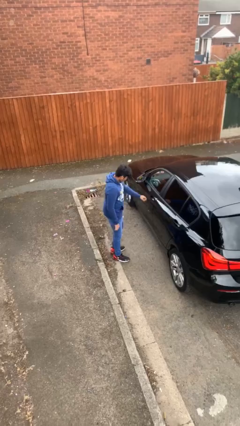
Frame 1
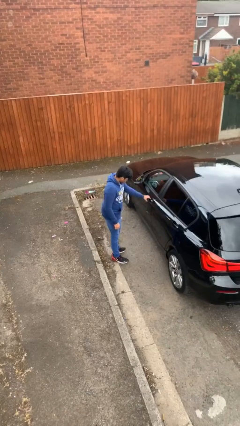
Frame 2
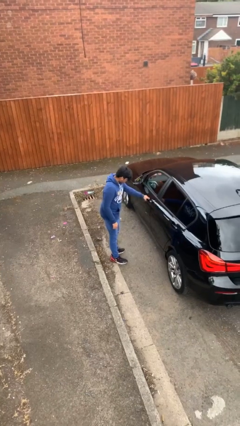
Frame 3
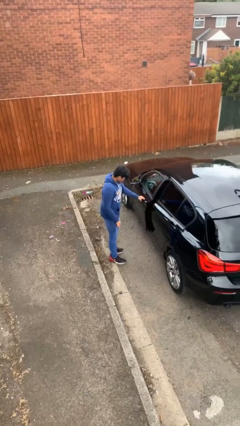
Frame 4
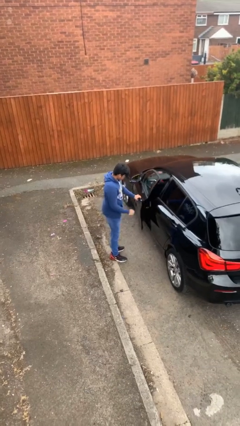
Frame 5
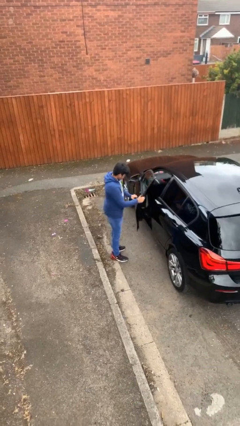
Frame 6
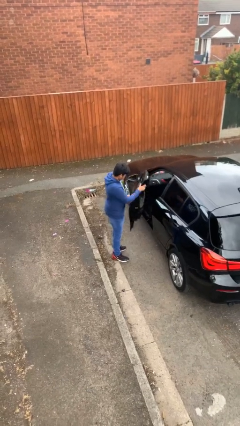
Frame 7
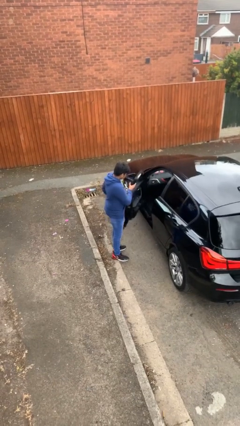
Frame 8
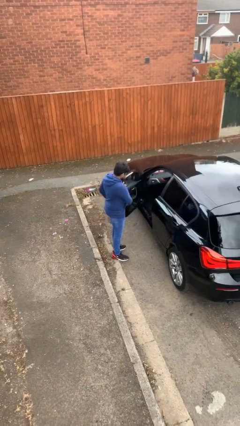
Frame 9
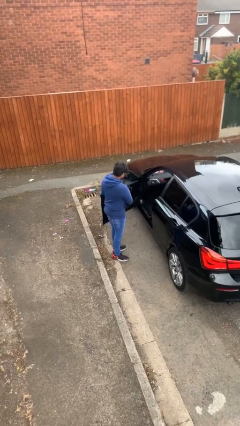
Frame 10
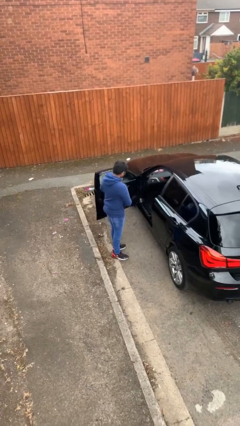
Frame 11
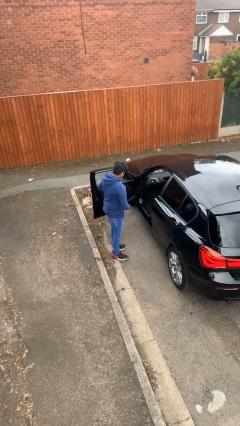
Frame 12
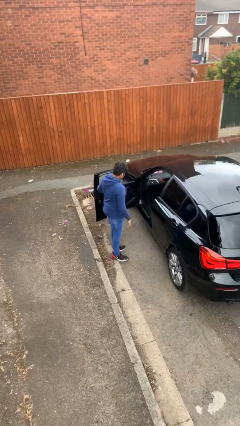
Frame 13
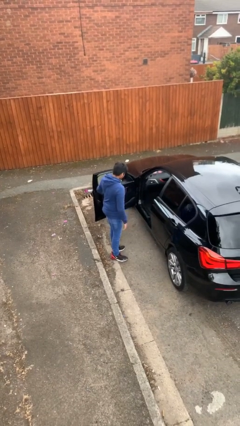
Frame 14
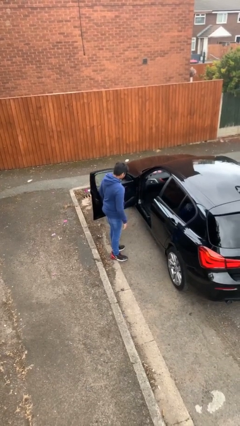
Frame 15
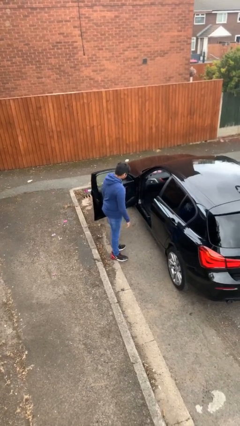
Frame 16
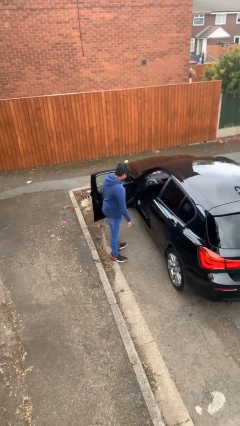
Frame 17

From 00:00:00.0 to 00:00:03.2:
person opens car door

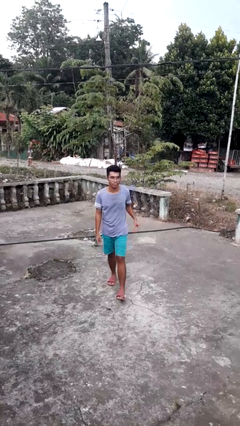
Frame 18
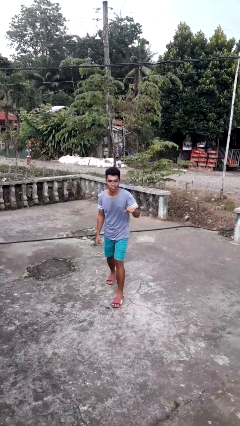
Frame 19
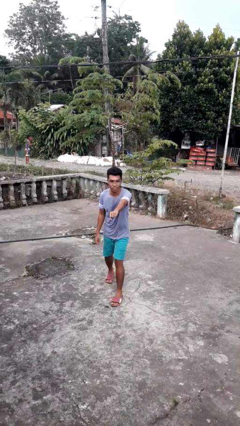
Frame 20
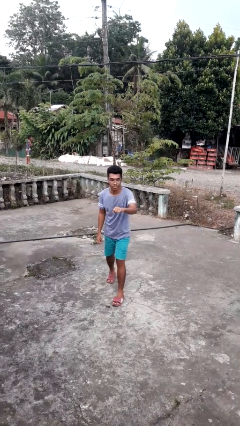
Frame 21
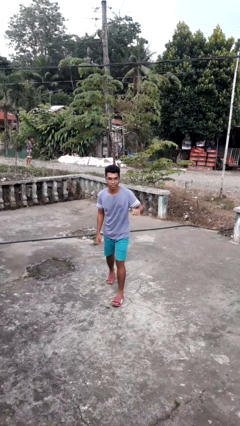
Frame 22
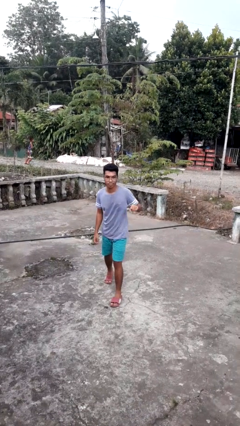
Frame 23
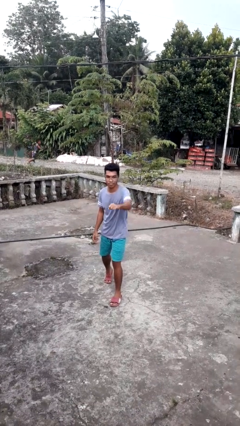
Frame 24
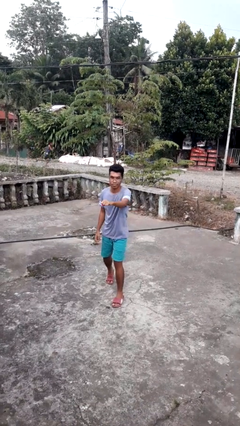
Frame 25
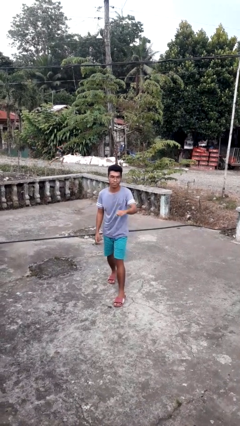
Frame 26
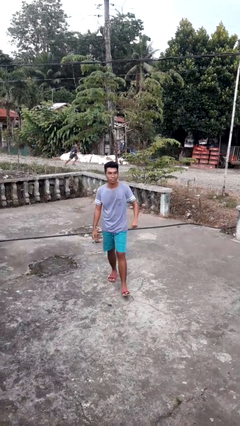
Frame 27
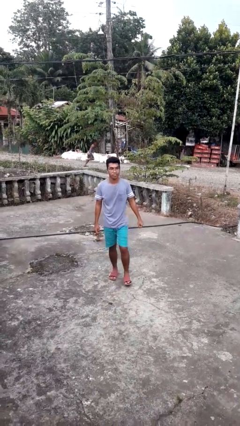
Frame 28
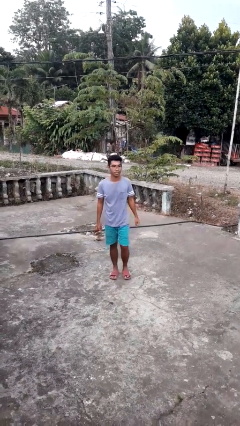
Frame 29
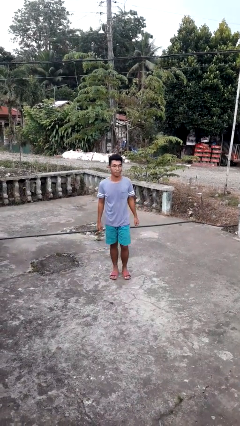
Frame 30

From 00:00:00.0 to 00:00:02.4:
person punches

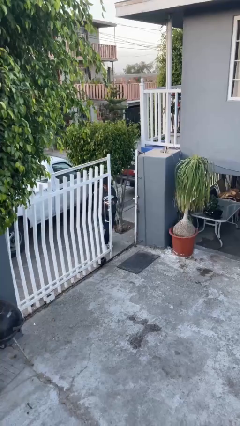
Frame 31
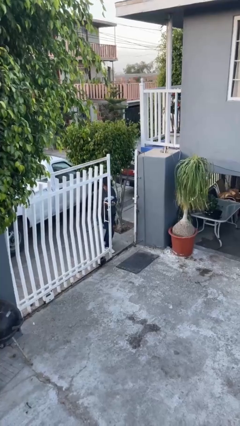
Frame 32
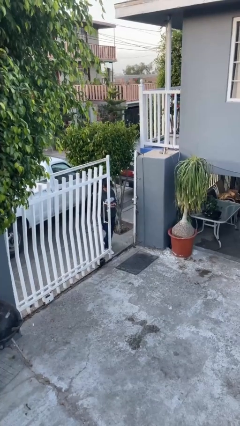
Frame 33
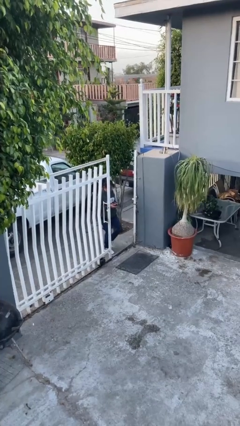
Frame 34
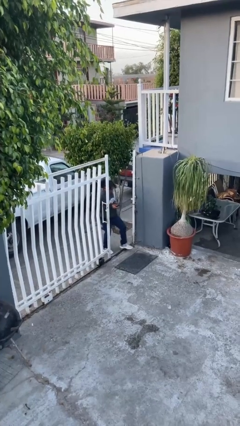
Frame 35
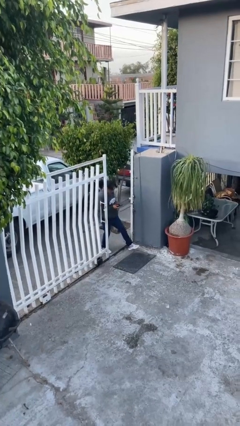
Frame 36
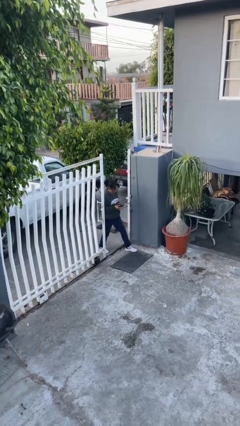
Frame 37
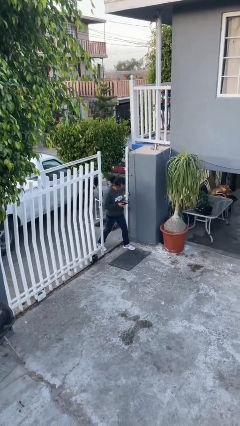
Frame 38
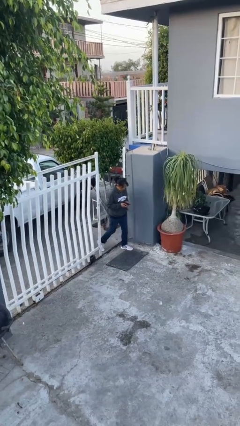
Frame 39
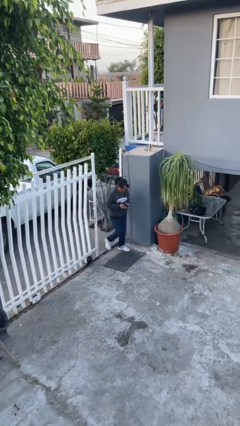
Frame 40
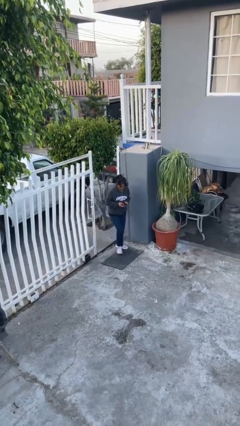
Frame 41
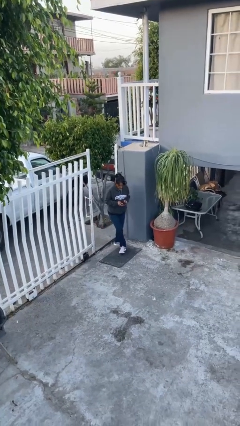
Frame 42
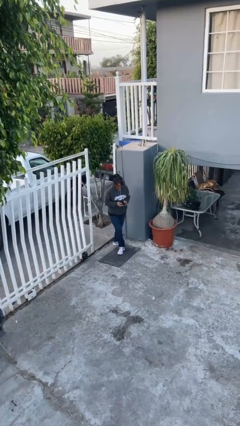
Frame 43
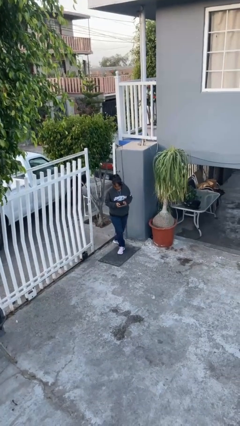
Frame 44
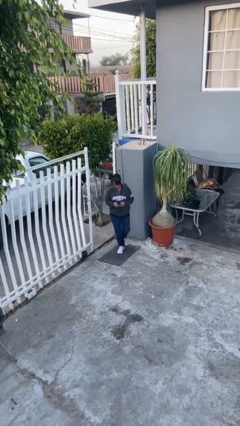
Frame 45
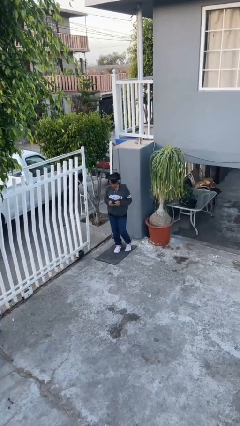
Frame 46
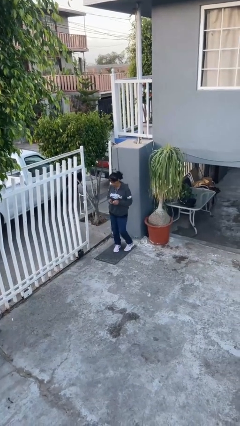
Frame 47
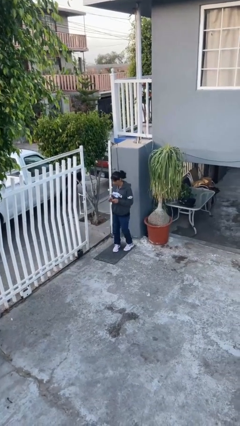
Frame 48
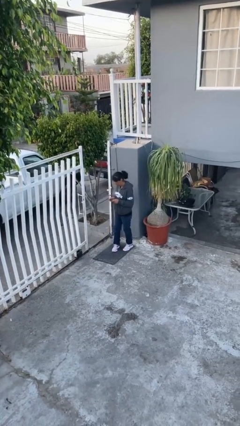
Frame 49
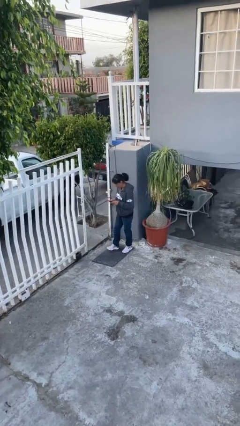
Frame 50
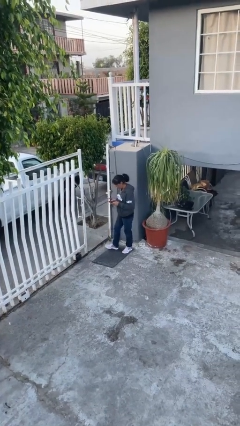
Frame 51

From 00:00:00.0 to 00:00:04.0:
person enters scene through structure

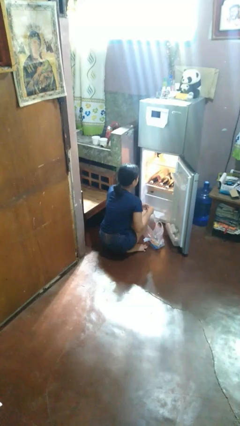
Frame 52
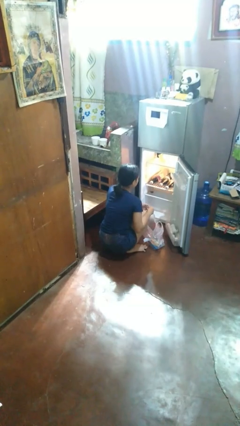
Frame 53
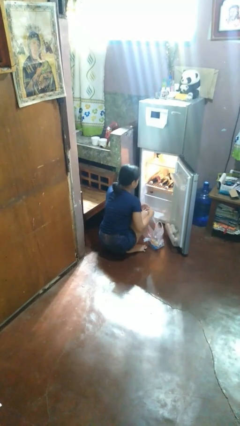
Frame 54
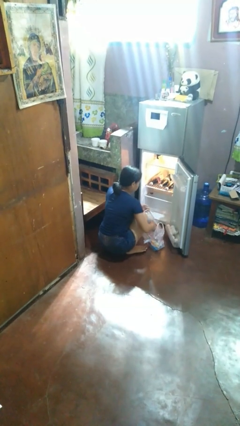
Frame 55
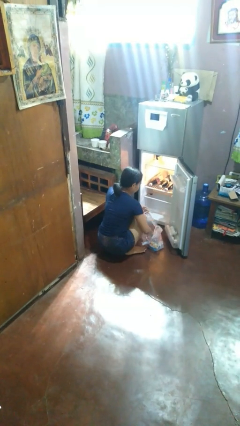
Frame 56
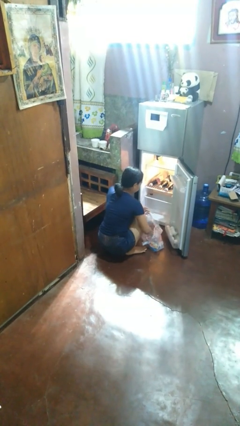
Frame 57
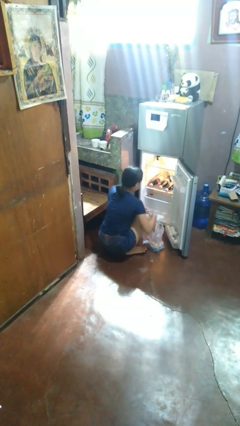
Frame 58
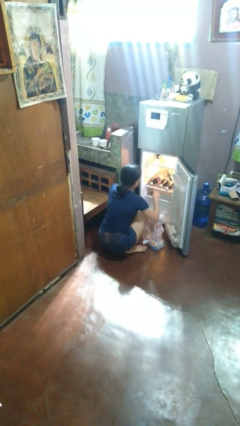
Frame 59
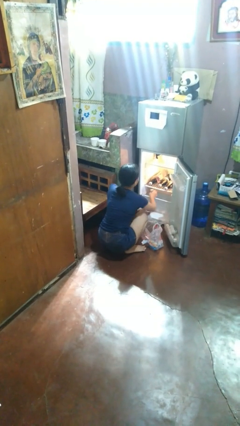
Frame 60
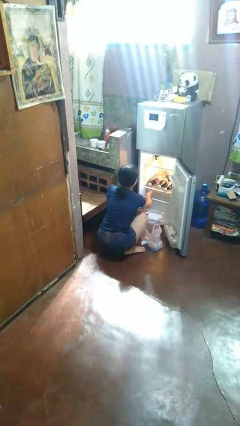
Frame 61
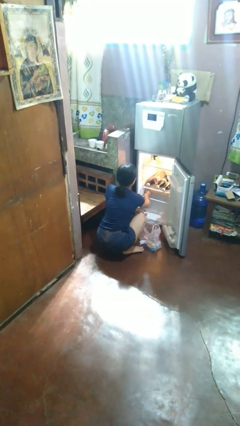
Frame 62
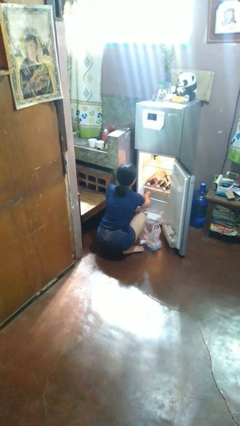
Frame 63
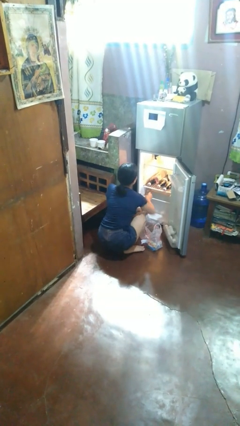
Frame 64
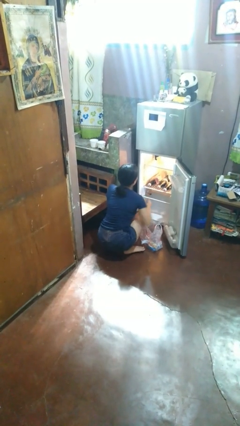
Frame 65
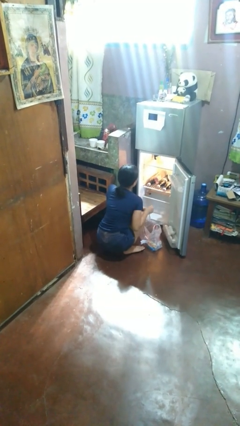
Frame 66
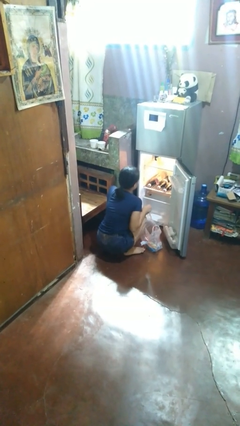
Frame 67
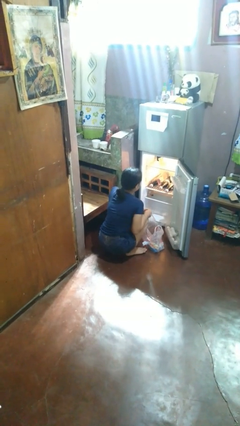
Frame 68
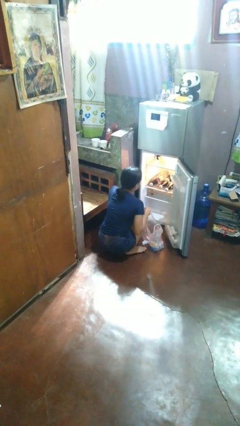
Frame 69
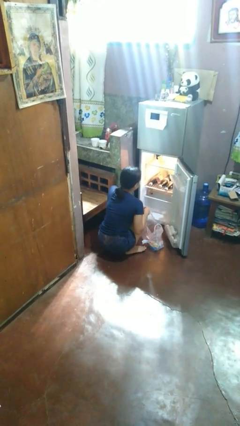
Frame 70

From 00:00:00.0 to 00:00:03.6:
person loads groceries into refrigerator

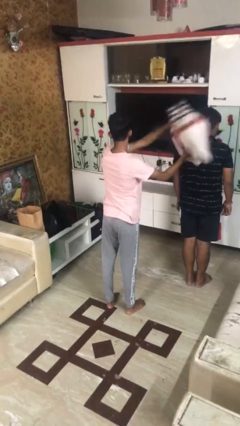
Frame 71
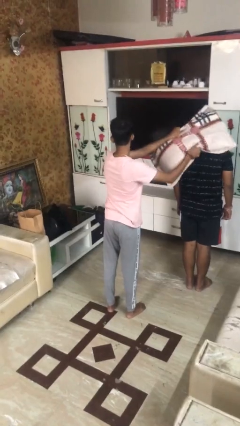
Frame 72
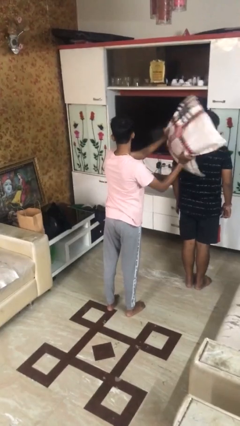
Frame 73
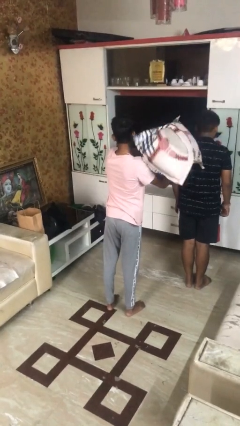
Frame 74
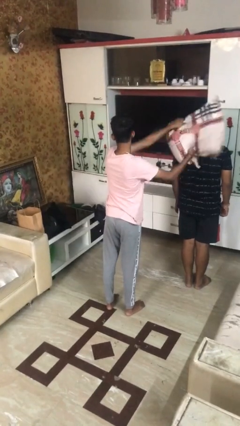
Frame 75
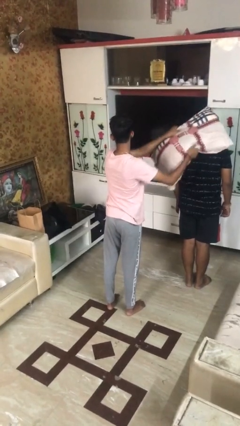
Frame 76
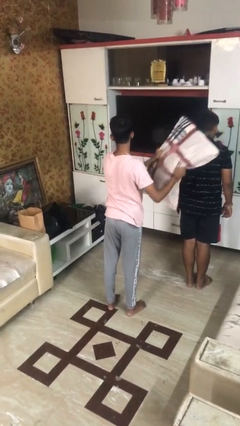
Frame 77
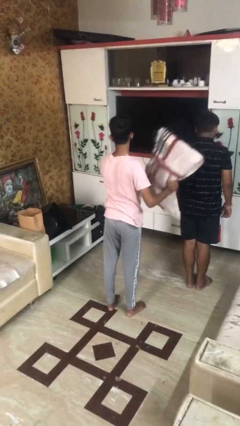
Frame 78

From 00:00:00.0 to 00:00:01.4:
person hits person with pillow

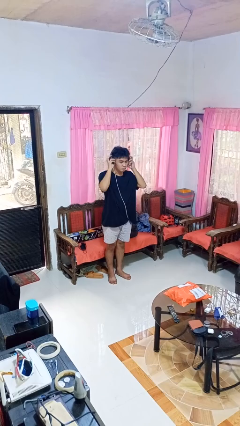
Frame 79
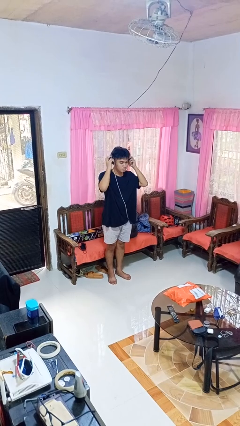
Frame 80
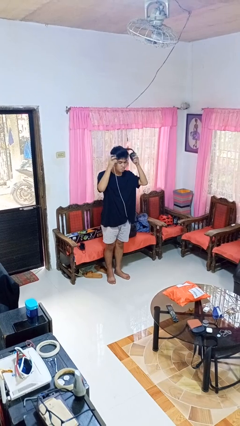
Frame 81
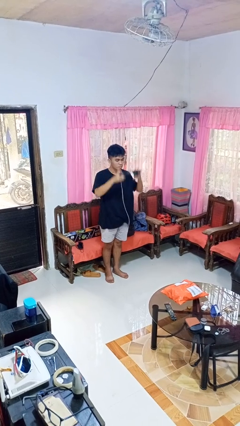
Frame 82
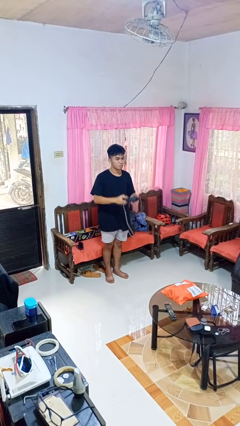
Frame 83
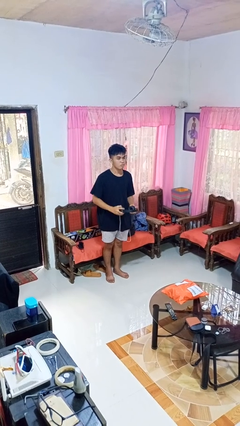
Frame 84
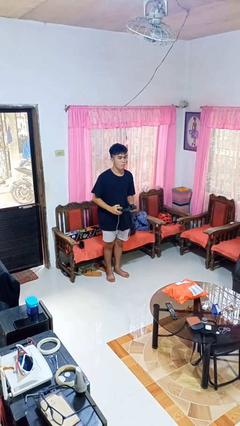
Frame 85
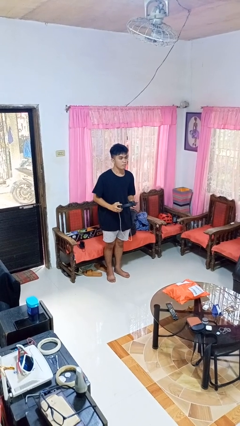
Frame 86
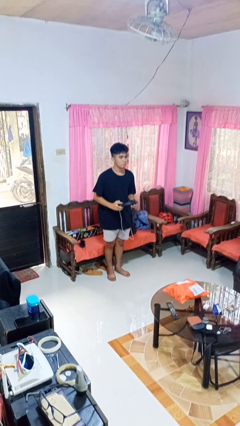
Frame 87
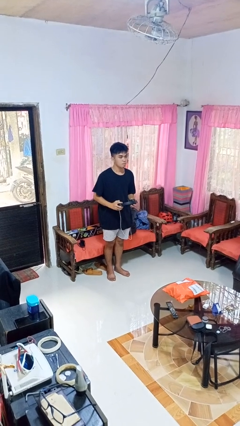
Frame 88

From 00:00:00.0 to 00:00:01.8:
person takes off headphones

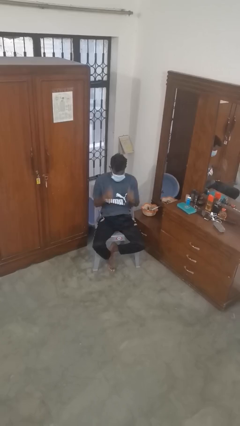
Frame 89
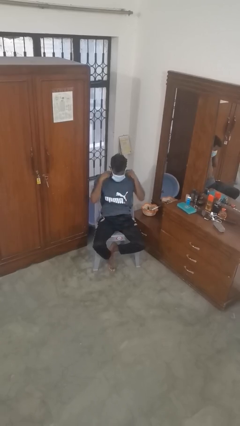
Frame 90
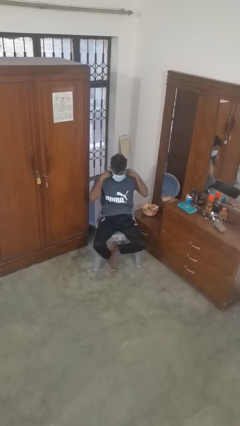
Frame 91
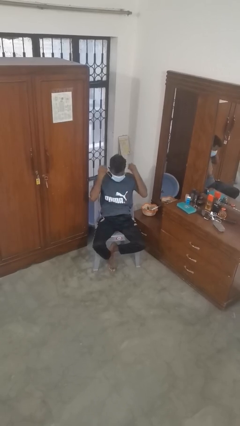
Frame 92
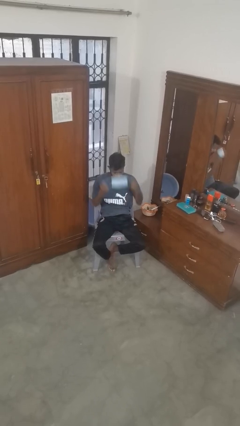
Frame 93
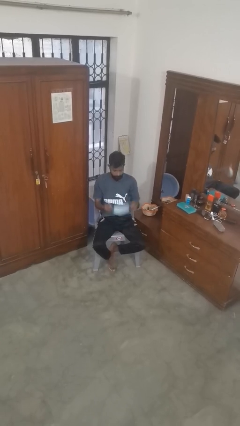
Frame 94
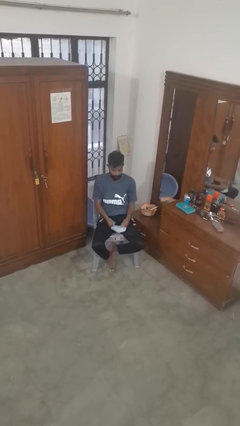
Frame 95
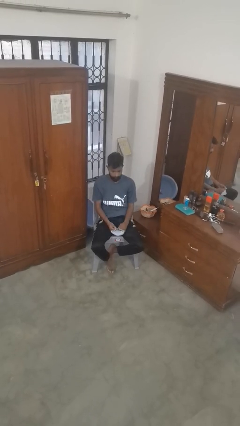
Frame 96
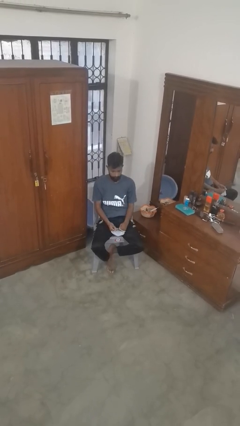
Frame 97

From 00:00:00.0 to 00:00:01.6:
person takes off facemask
